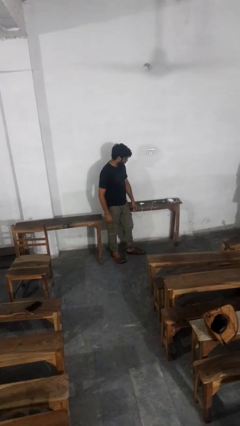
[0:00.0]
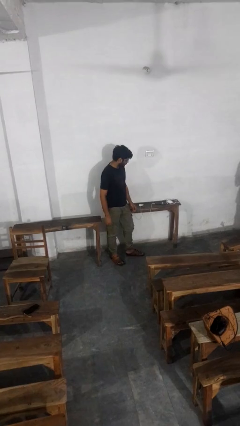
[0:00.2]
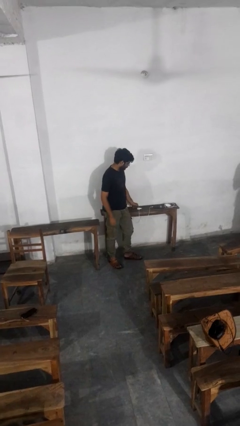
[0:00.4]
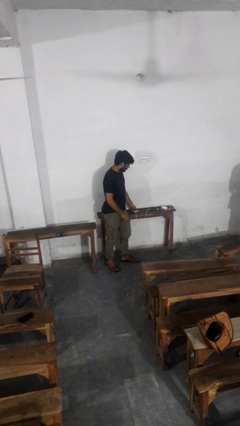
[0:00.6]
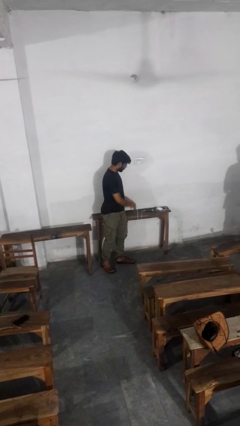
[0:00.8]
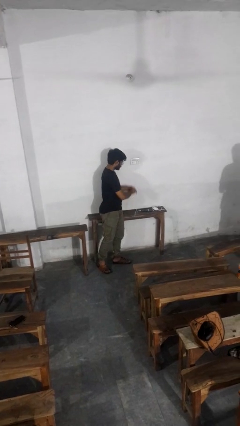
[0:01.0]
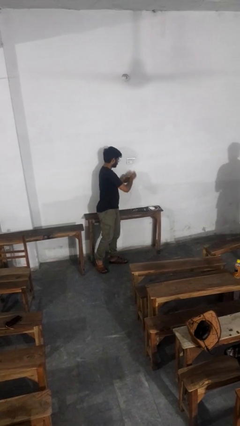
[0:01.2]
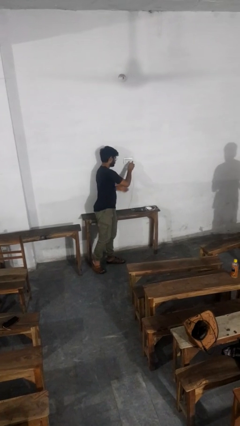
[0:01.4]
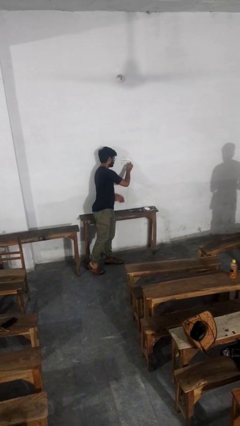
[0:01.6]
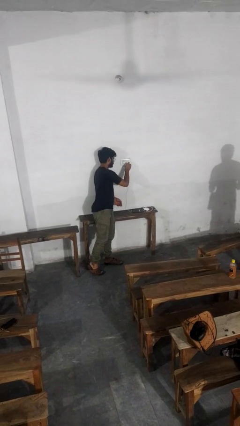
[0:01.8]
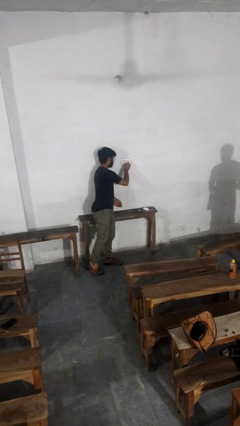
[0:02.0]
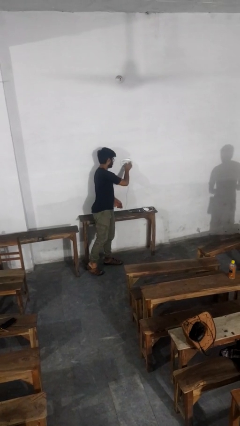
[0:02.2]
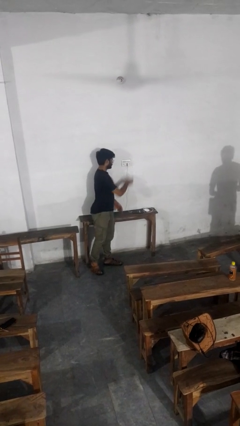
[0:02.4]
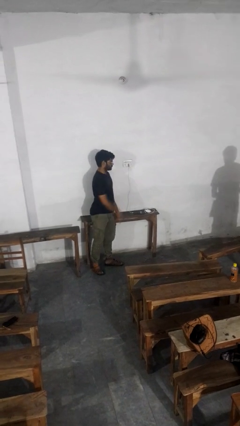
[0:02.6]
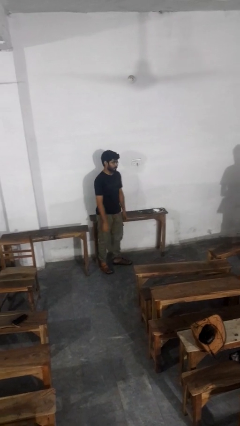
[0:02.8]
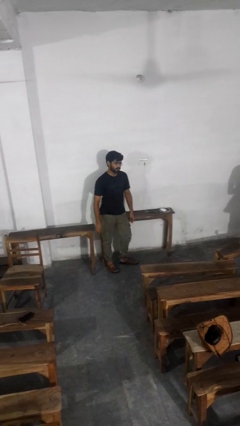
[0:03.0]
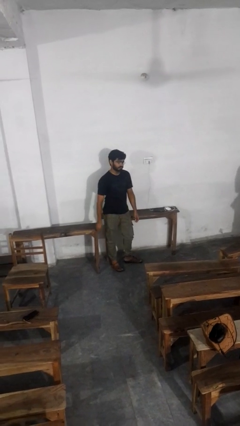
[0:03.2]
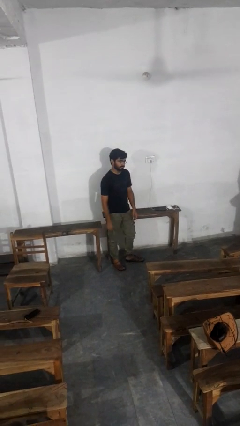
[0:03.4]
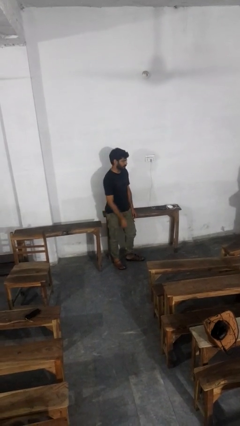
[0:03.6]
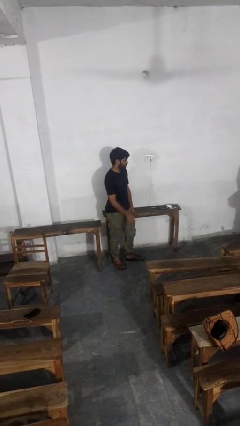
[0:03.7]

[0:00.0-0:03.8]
person plugs into electrical socket

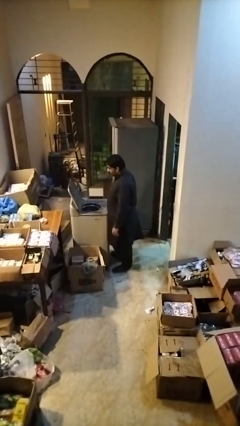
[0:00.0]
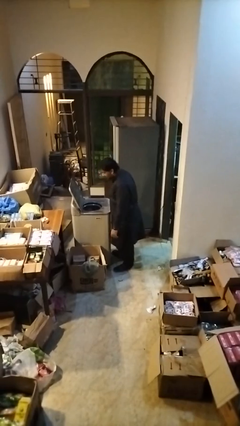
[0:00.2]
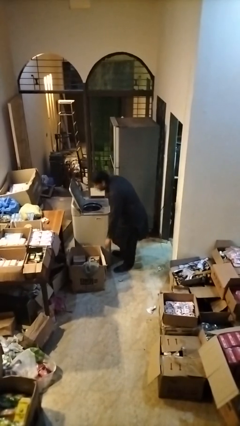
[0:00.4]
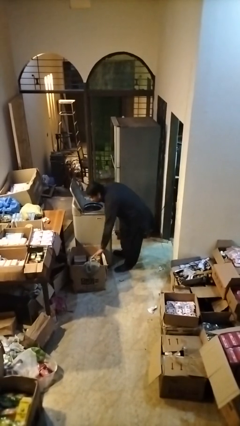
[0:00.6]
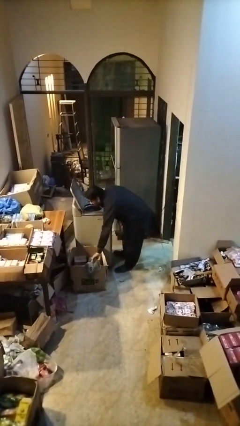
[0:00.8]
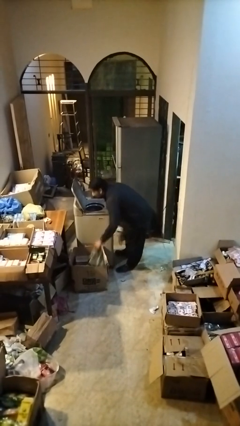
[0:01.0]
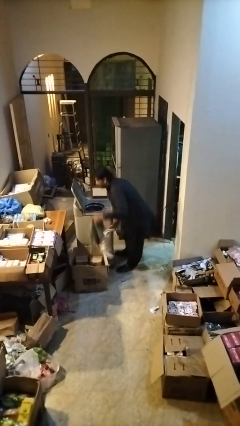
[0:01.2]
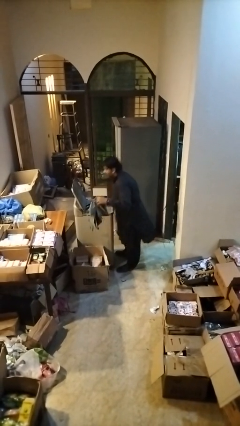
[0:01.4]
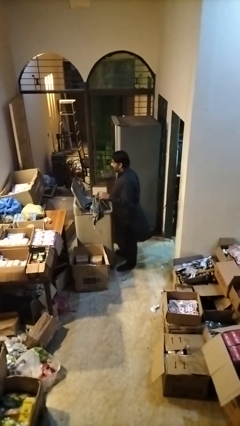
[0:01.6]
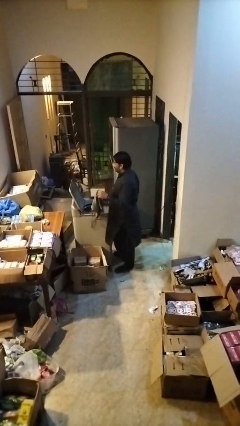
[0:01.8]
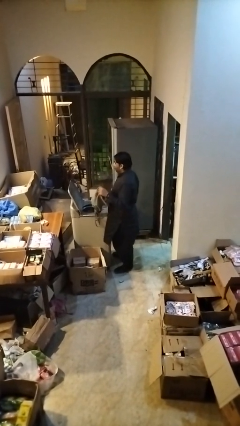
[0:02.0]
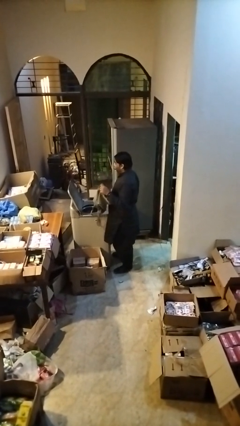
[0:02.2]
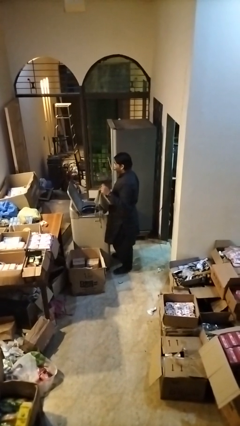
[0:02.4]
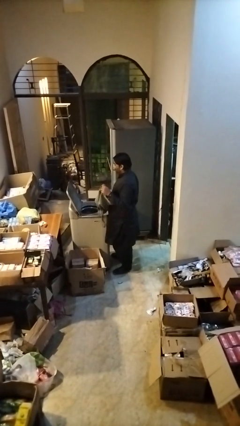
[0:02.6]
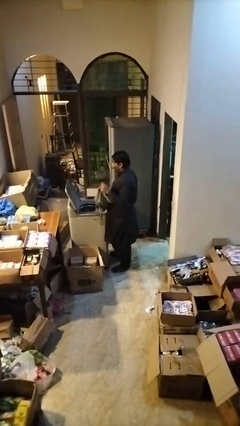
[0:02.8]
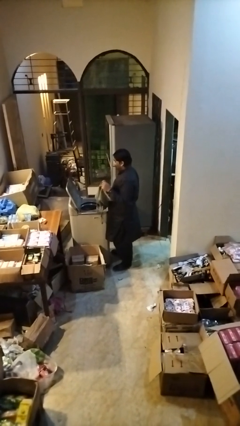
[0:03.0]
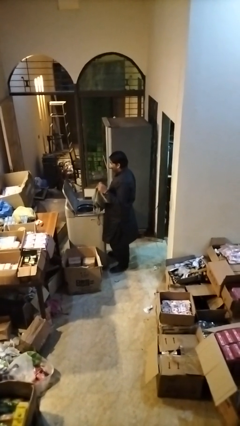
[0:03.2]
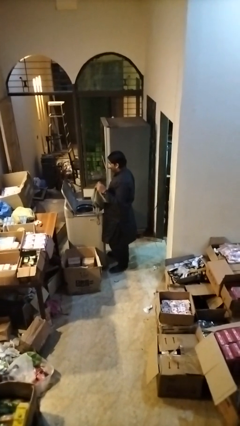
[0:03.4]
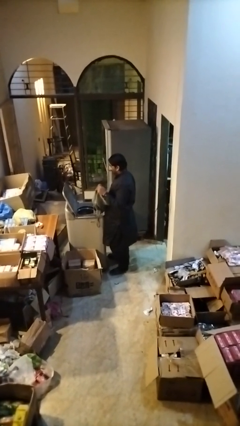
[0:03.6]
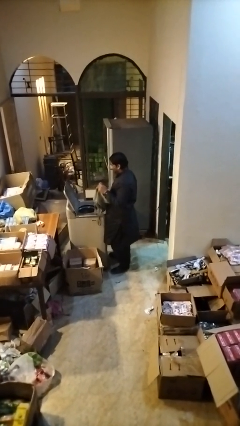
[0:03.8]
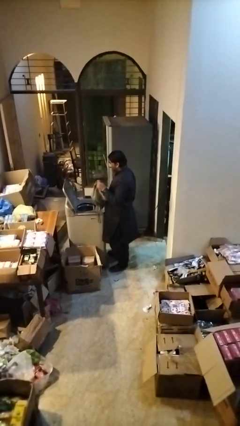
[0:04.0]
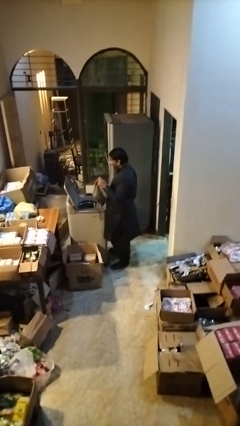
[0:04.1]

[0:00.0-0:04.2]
person unloads clotheswasher

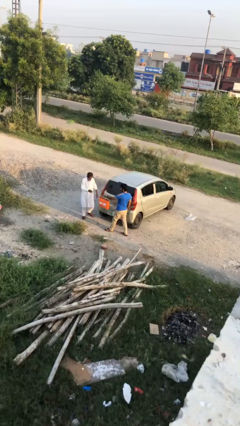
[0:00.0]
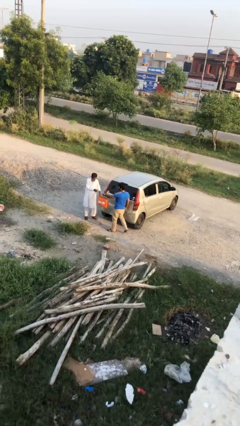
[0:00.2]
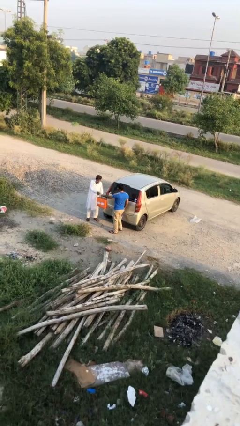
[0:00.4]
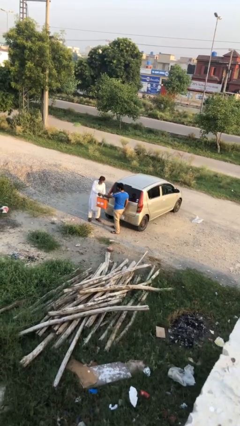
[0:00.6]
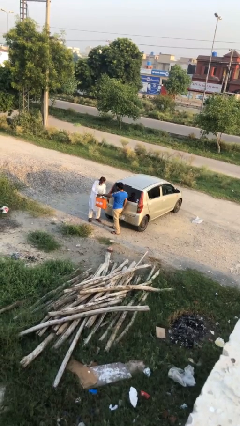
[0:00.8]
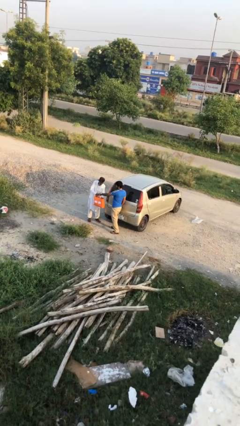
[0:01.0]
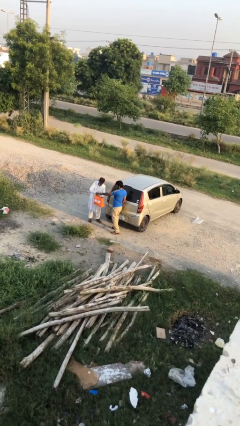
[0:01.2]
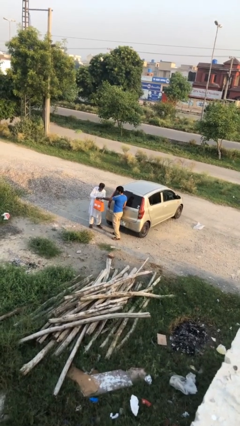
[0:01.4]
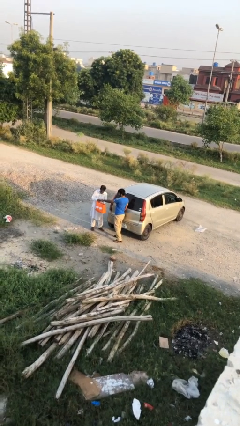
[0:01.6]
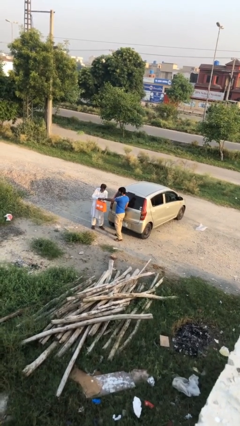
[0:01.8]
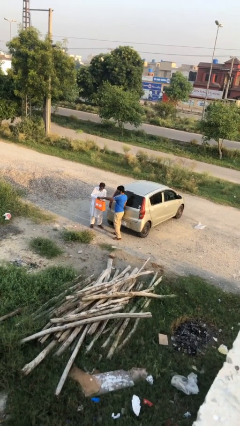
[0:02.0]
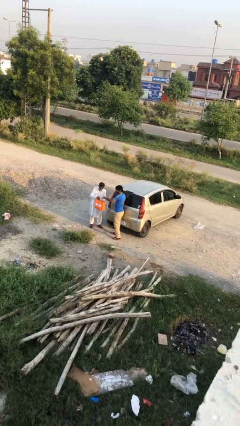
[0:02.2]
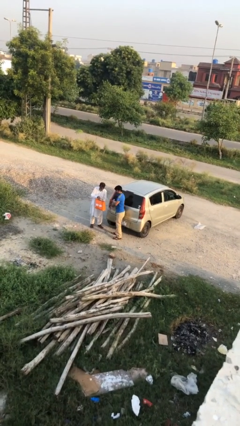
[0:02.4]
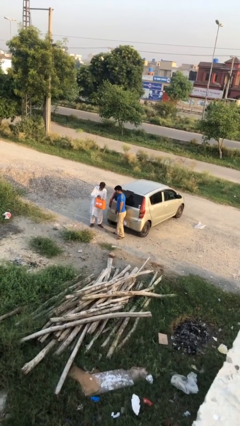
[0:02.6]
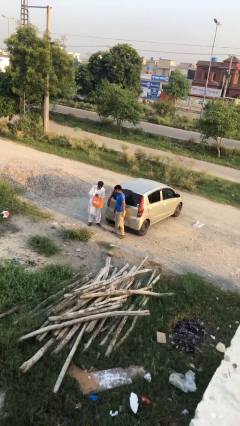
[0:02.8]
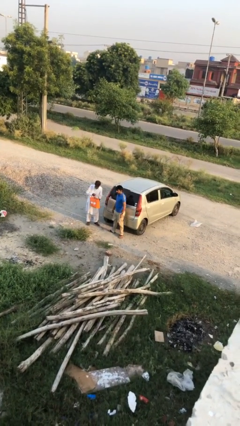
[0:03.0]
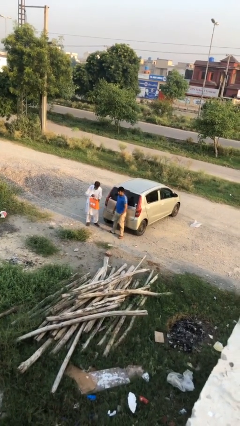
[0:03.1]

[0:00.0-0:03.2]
person transfers object to person

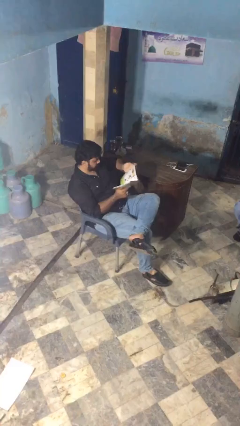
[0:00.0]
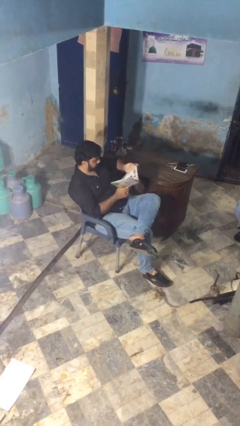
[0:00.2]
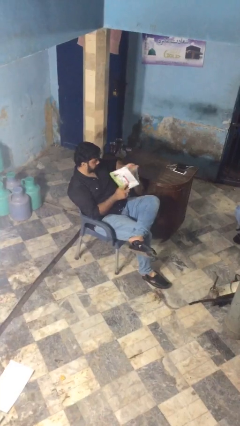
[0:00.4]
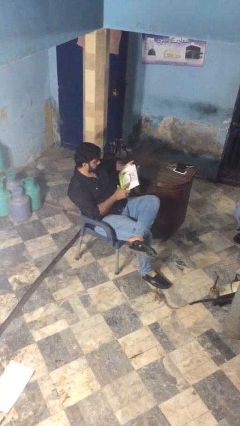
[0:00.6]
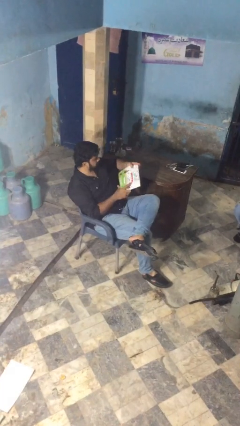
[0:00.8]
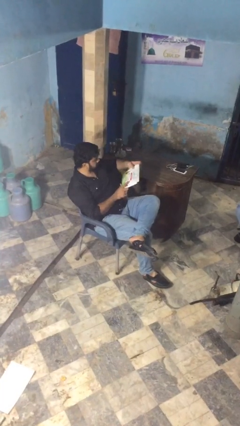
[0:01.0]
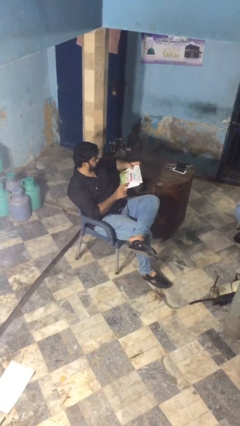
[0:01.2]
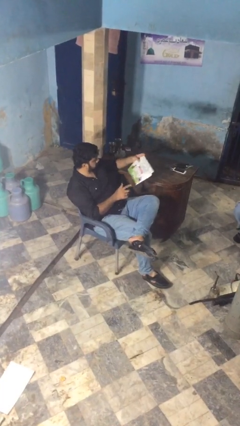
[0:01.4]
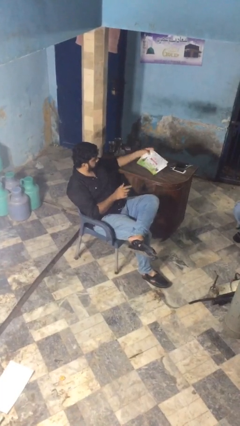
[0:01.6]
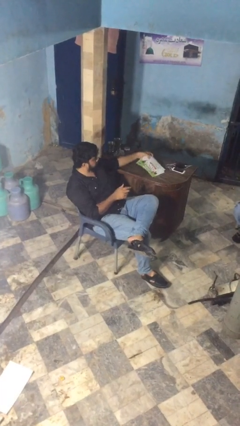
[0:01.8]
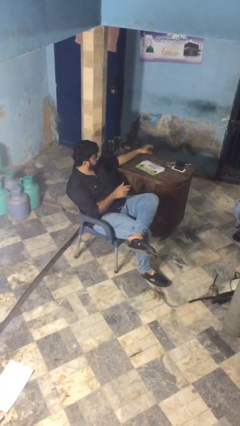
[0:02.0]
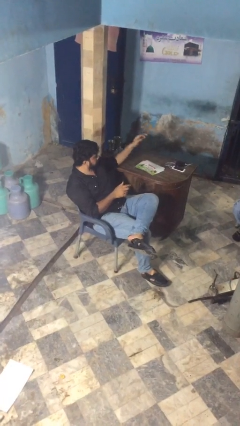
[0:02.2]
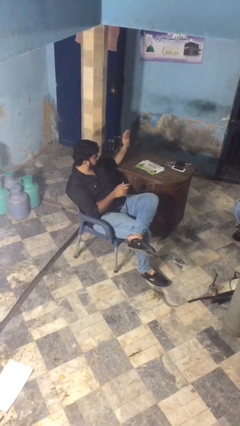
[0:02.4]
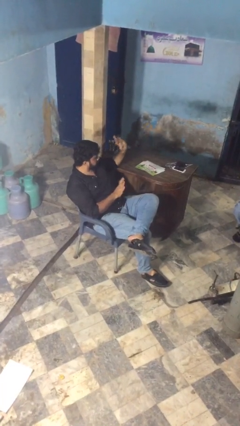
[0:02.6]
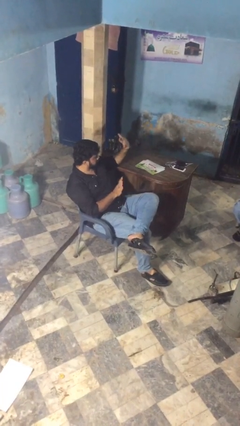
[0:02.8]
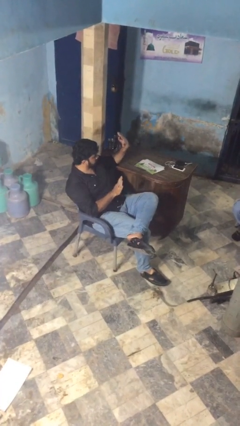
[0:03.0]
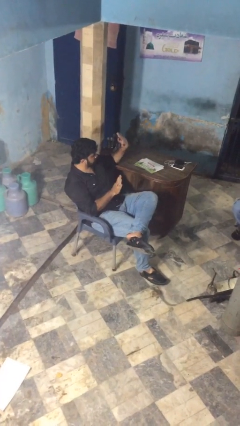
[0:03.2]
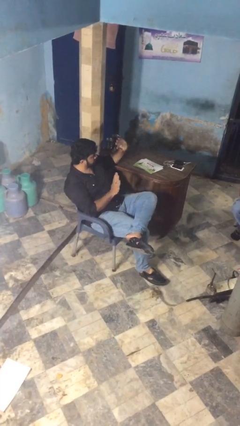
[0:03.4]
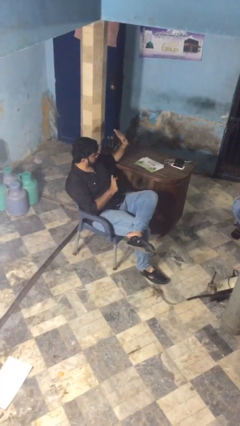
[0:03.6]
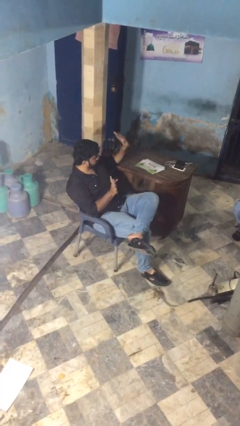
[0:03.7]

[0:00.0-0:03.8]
person puts down object on table

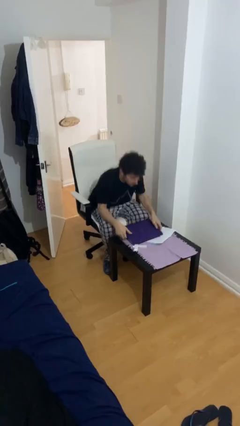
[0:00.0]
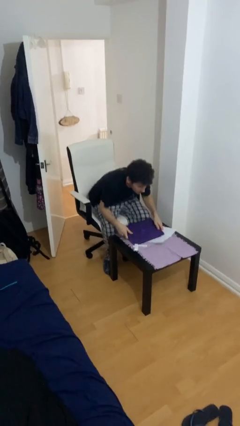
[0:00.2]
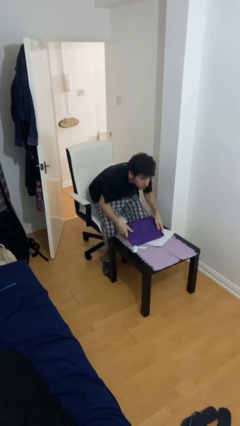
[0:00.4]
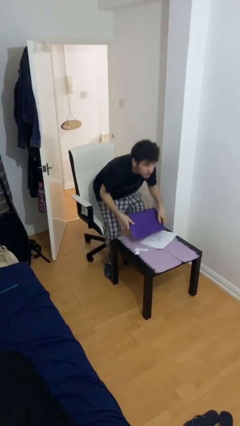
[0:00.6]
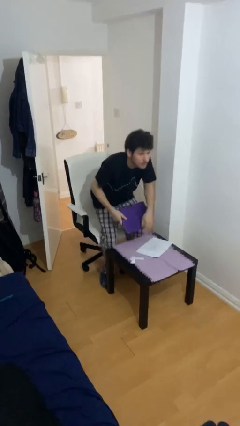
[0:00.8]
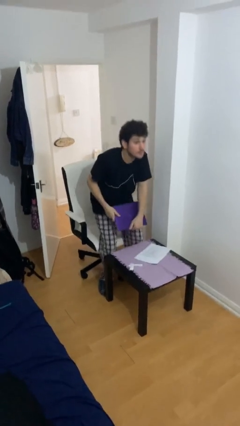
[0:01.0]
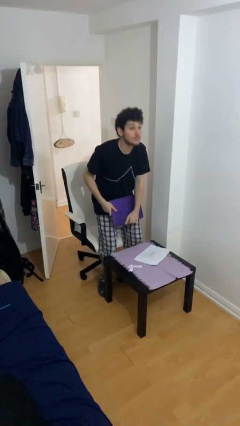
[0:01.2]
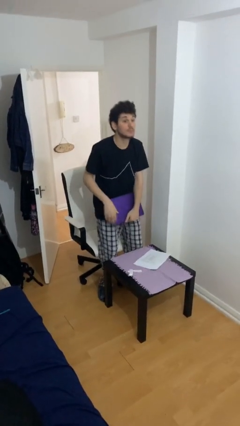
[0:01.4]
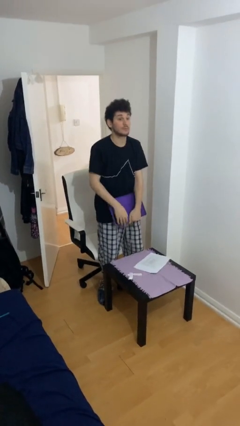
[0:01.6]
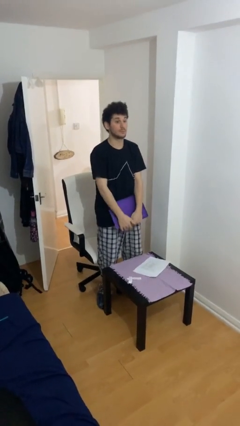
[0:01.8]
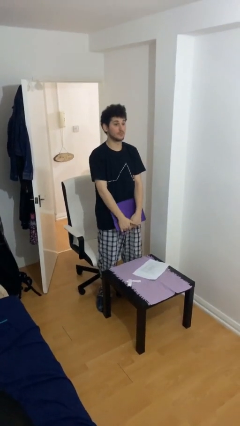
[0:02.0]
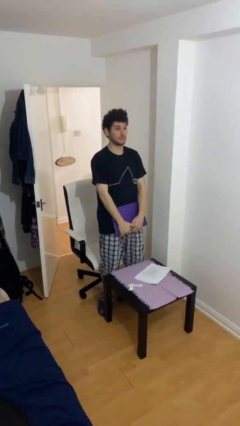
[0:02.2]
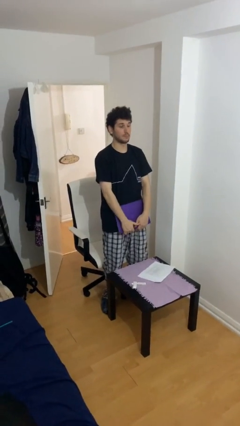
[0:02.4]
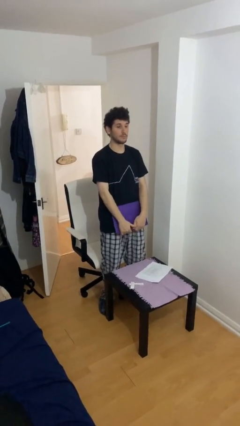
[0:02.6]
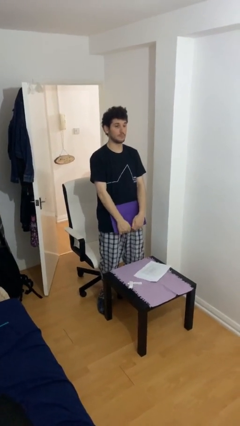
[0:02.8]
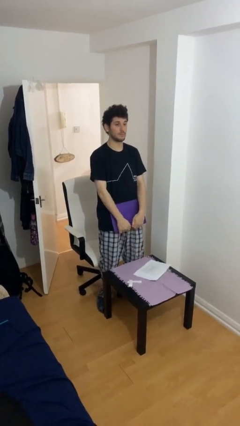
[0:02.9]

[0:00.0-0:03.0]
person stands up
